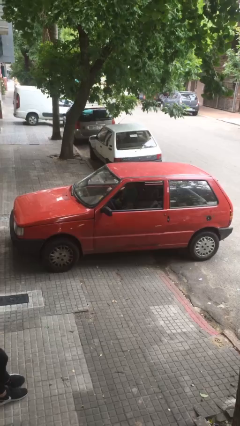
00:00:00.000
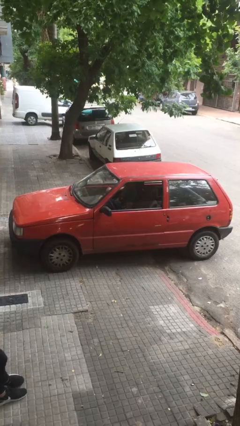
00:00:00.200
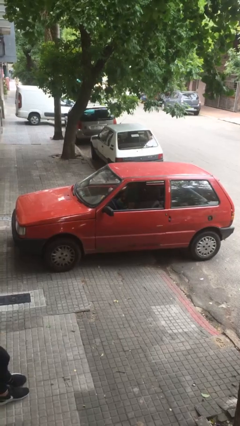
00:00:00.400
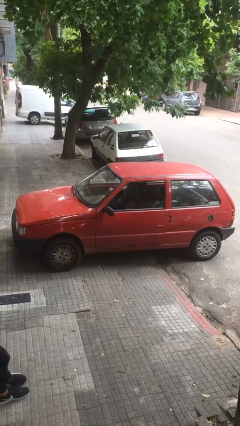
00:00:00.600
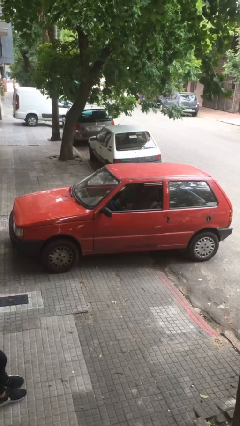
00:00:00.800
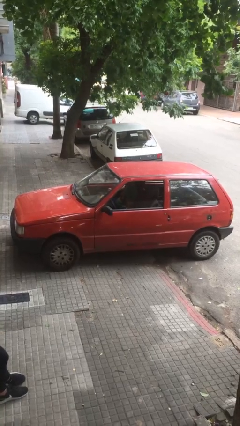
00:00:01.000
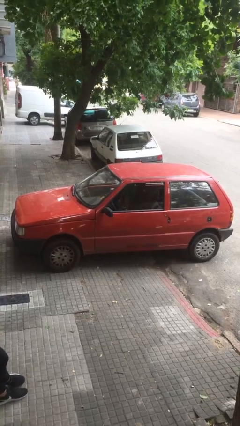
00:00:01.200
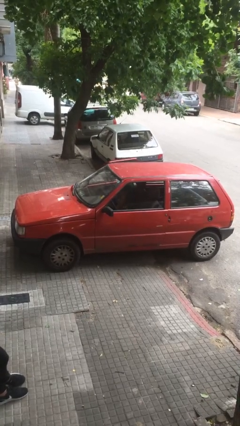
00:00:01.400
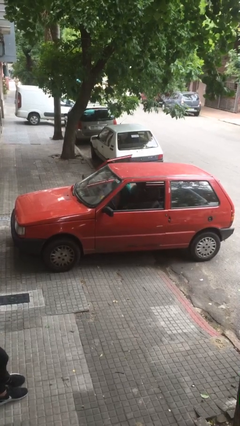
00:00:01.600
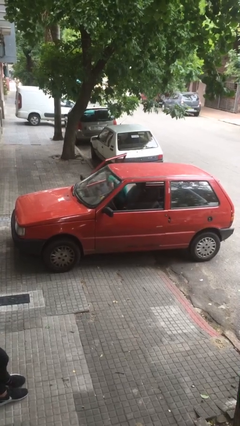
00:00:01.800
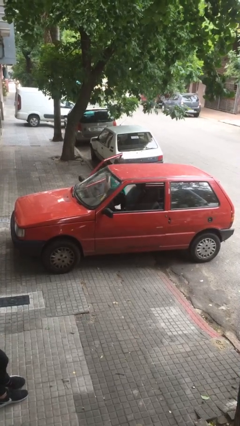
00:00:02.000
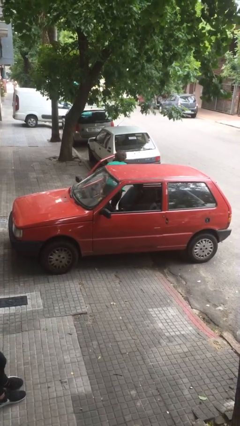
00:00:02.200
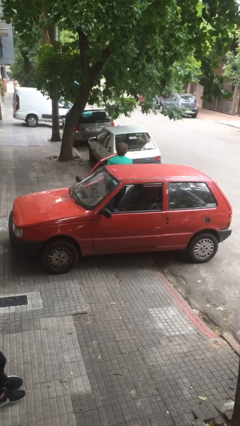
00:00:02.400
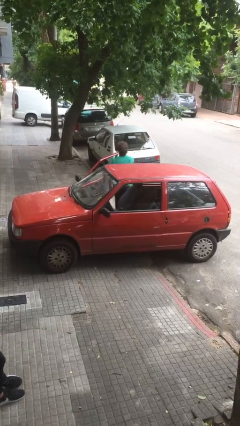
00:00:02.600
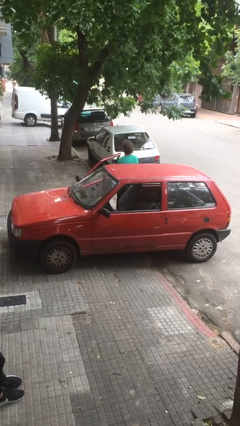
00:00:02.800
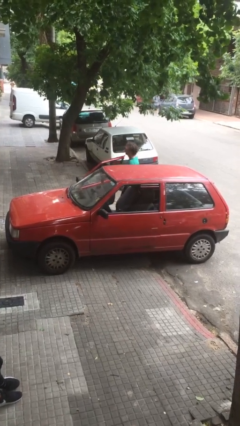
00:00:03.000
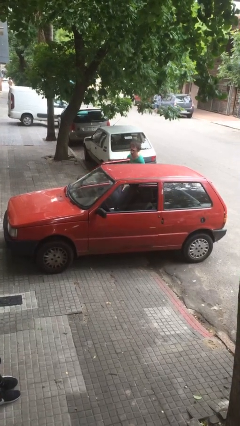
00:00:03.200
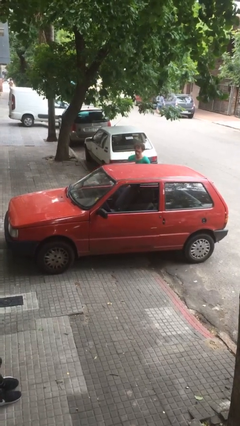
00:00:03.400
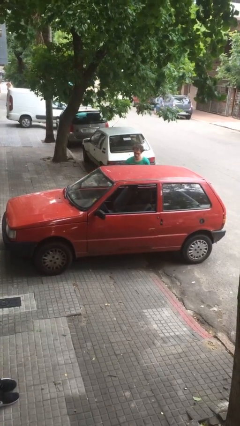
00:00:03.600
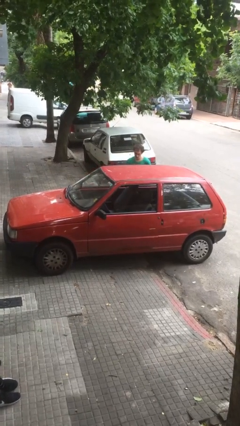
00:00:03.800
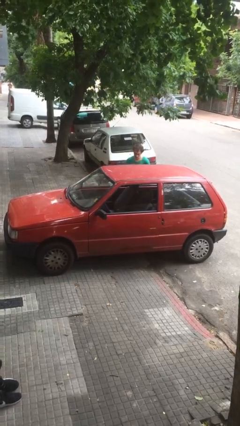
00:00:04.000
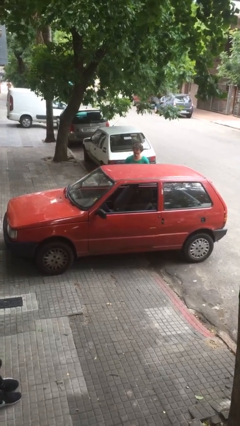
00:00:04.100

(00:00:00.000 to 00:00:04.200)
car drops off person

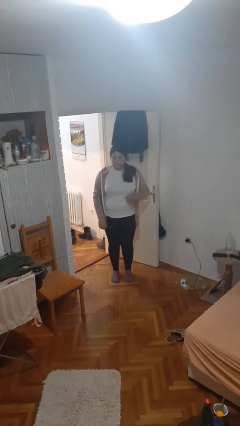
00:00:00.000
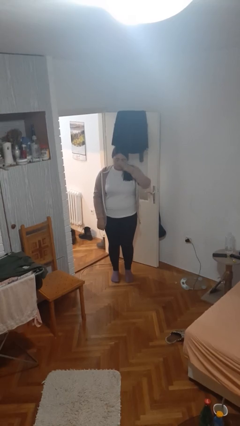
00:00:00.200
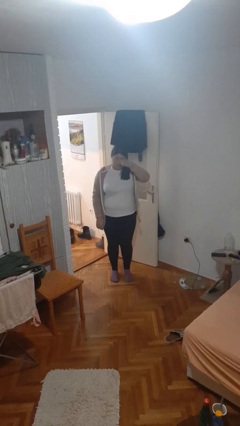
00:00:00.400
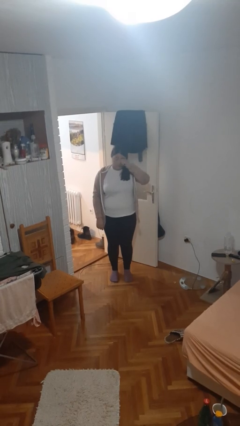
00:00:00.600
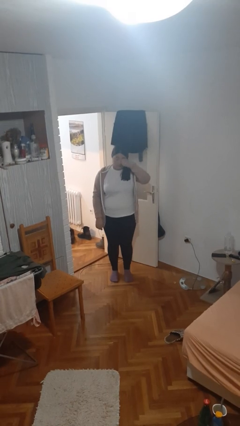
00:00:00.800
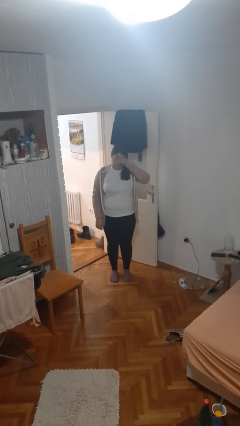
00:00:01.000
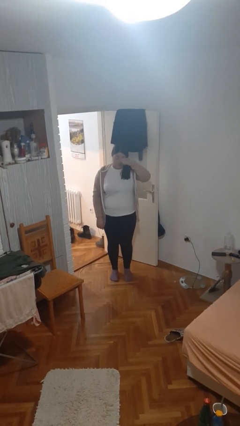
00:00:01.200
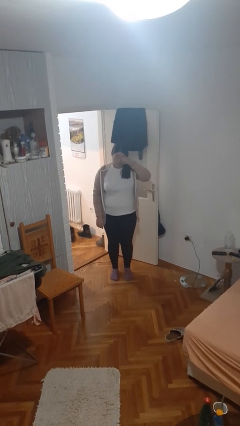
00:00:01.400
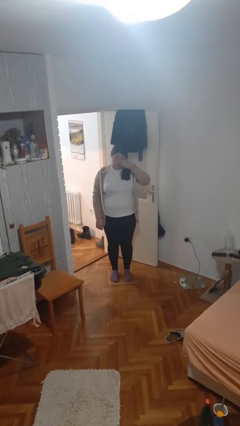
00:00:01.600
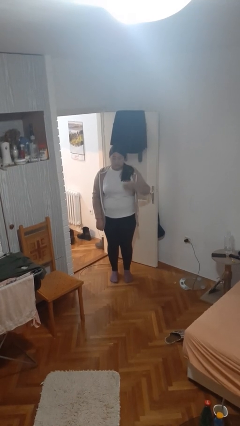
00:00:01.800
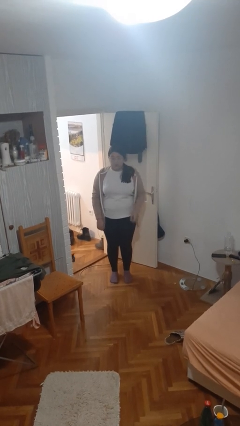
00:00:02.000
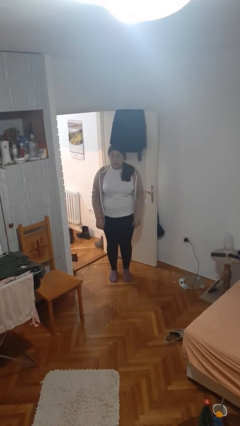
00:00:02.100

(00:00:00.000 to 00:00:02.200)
person rubs eyes

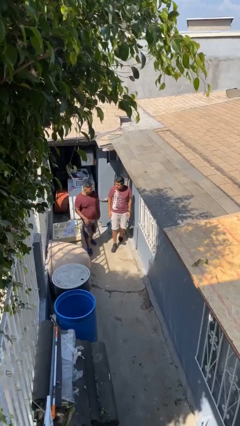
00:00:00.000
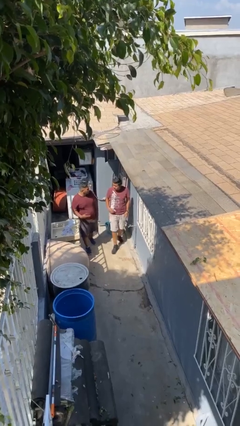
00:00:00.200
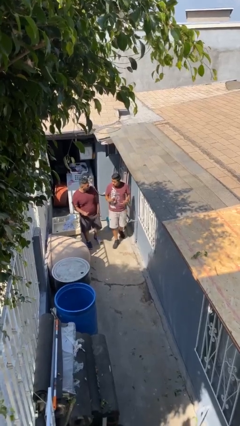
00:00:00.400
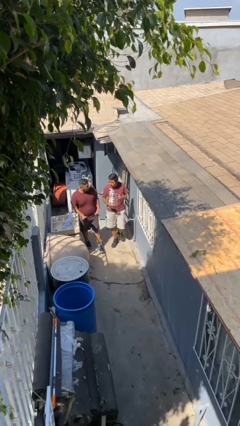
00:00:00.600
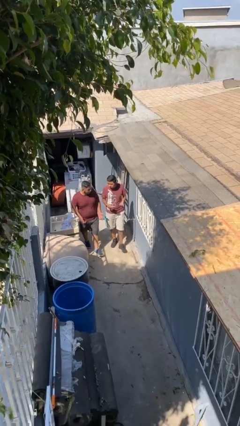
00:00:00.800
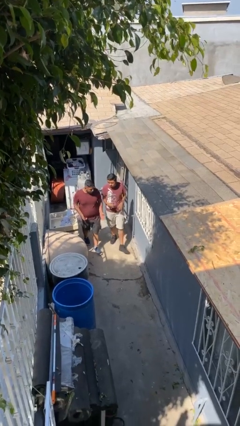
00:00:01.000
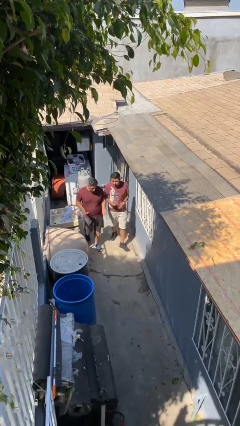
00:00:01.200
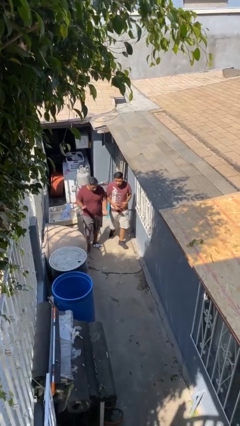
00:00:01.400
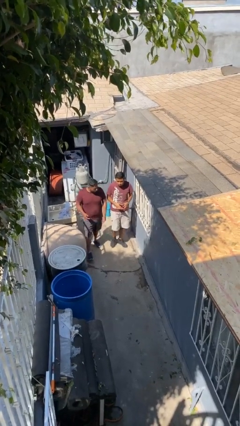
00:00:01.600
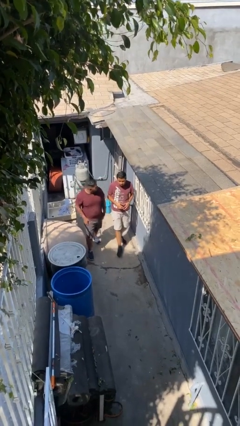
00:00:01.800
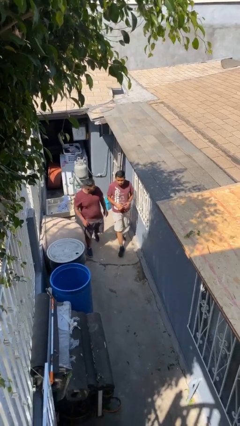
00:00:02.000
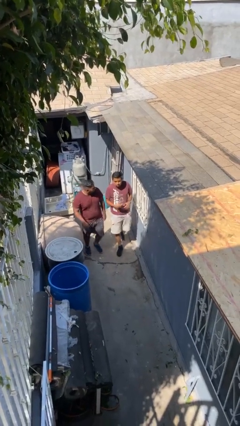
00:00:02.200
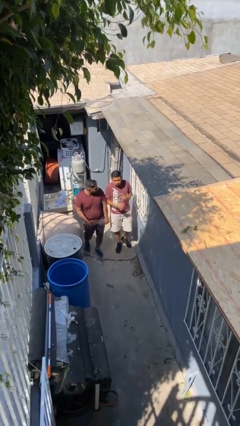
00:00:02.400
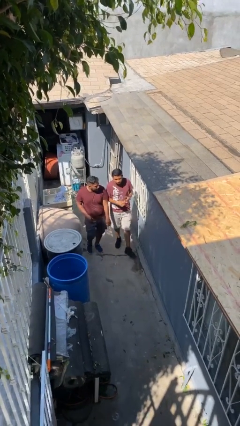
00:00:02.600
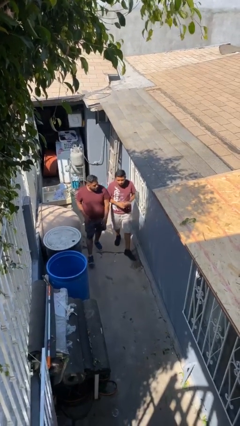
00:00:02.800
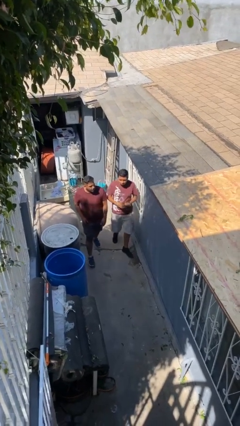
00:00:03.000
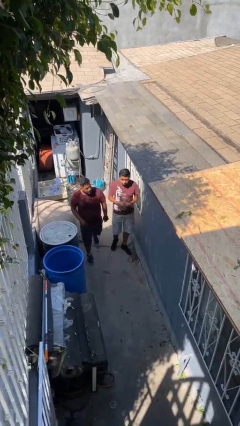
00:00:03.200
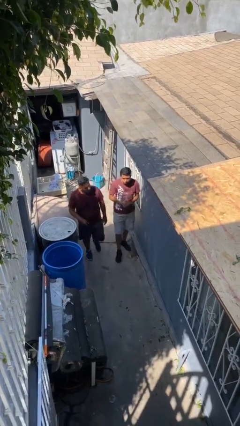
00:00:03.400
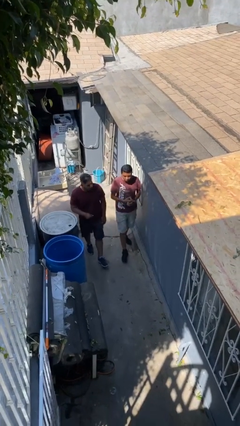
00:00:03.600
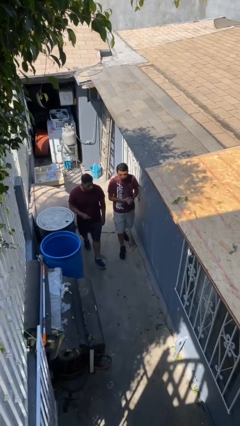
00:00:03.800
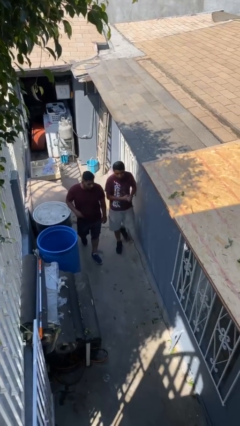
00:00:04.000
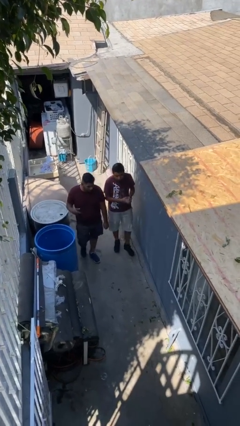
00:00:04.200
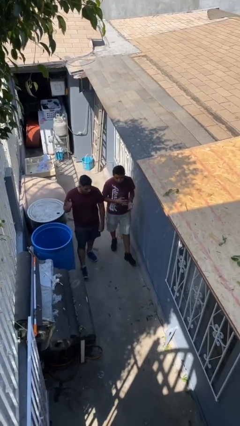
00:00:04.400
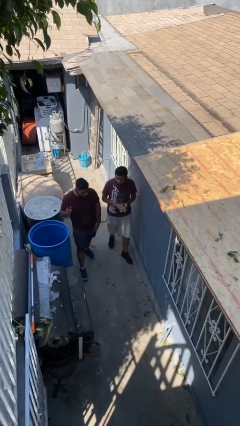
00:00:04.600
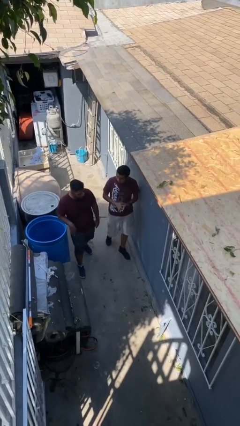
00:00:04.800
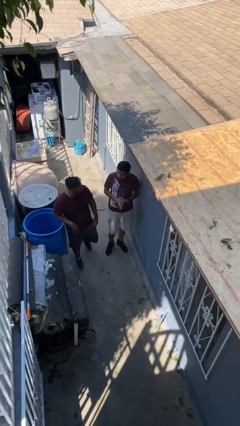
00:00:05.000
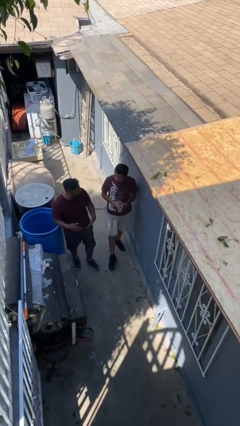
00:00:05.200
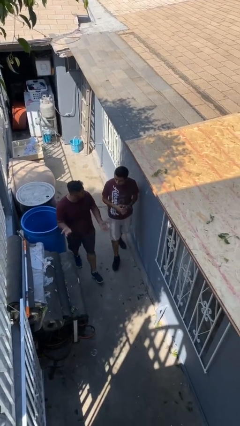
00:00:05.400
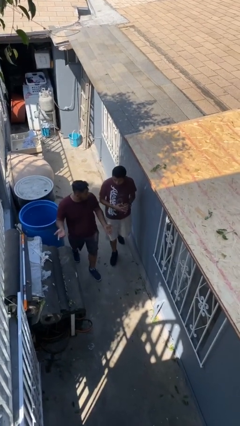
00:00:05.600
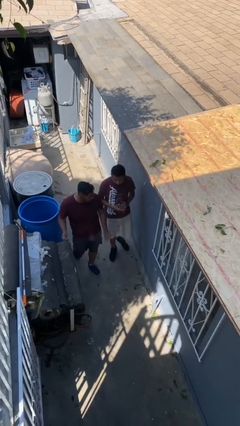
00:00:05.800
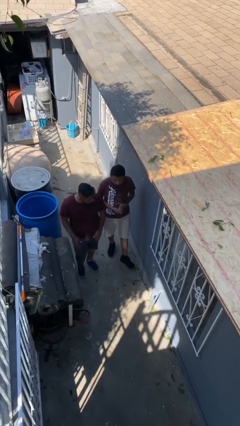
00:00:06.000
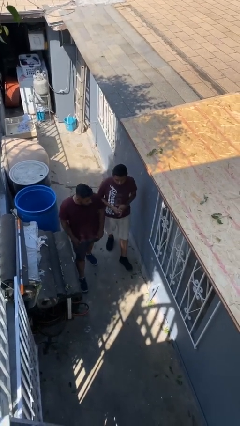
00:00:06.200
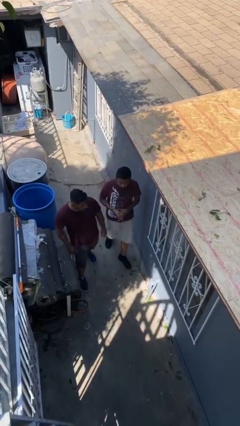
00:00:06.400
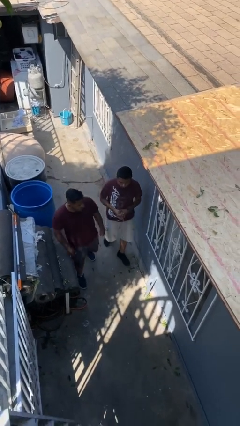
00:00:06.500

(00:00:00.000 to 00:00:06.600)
person talks to person

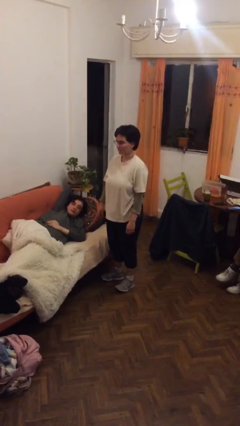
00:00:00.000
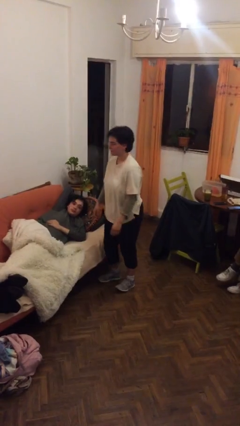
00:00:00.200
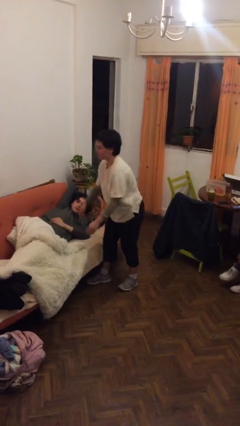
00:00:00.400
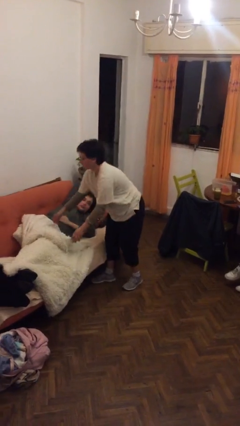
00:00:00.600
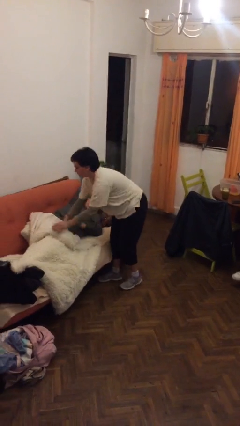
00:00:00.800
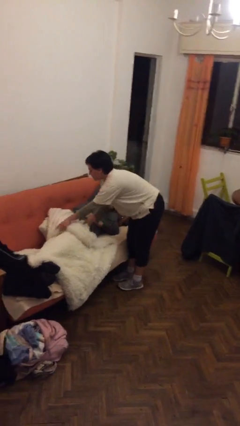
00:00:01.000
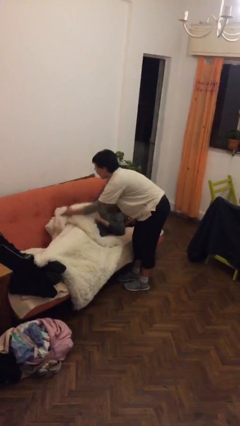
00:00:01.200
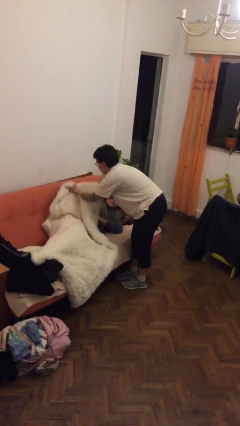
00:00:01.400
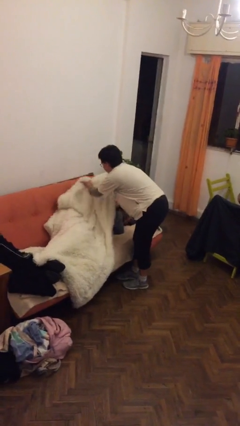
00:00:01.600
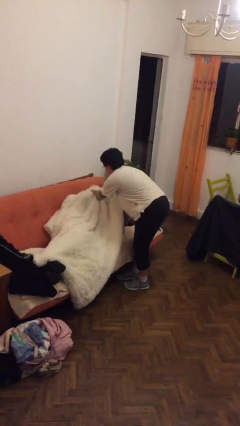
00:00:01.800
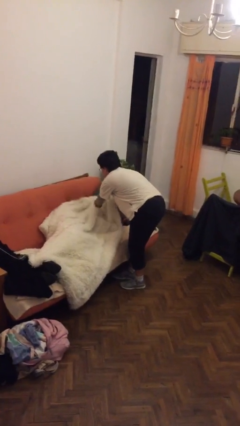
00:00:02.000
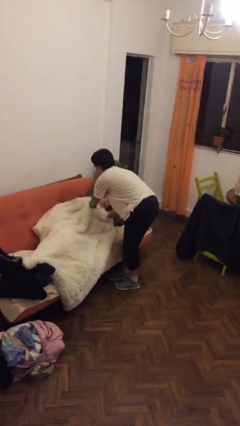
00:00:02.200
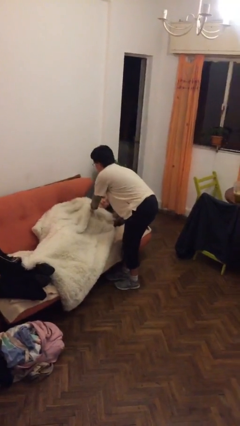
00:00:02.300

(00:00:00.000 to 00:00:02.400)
person covers friend with blanket

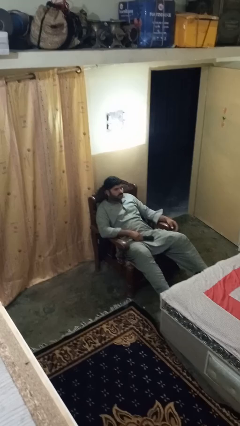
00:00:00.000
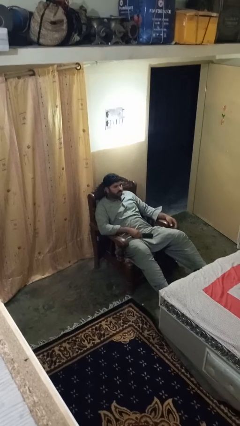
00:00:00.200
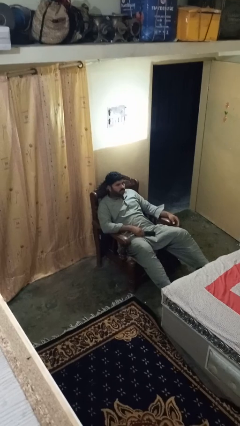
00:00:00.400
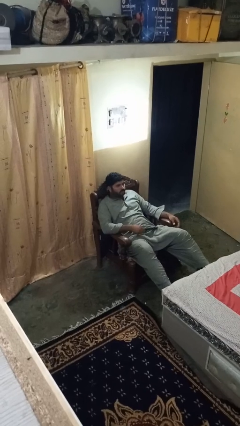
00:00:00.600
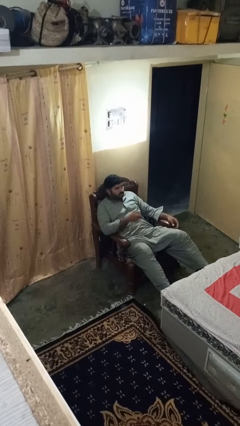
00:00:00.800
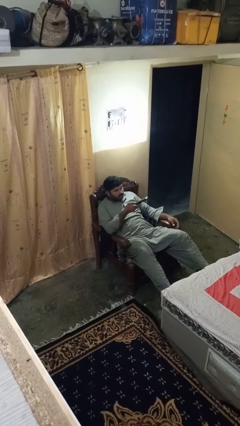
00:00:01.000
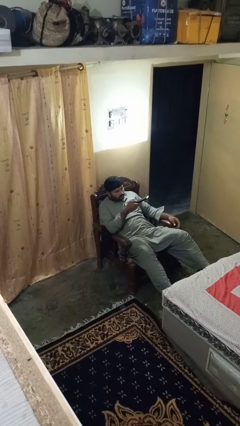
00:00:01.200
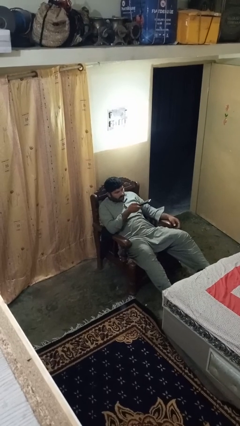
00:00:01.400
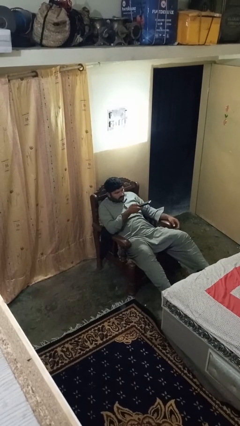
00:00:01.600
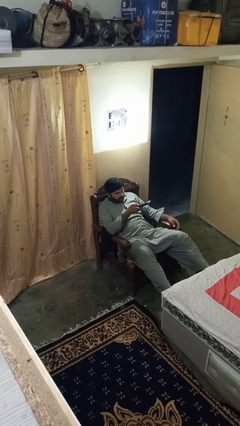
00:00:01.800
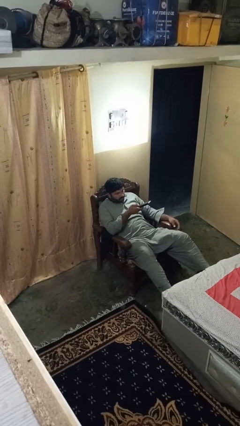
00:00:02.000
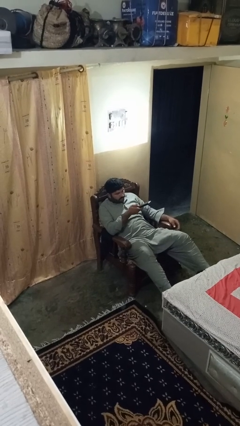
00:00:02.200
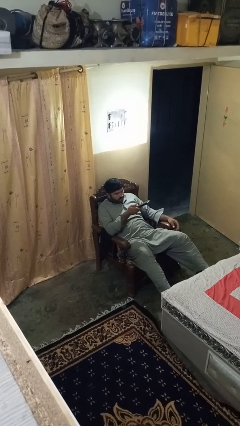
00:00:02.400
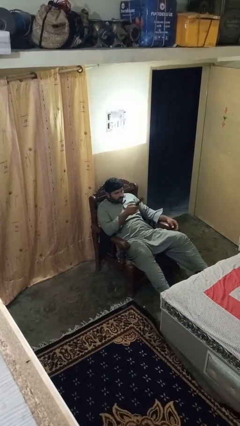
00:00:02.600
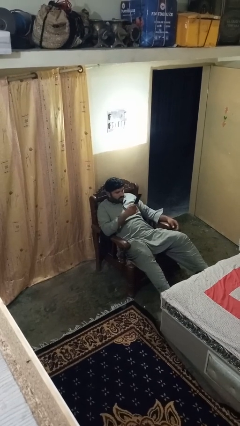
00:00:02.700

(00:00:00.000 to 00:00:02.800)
person uses television remote
